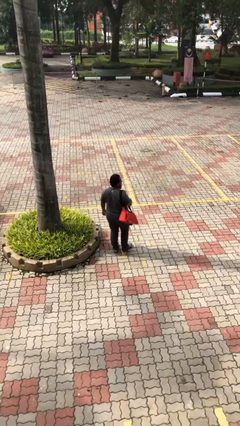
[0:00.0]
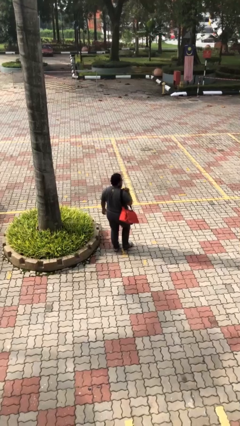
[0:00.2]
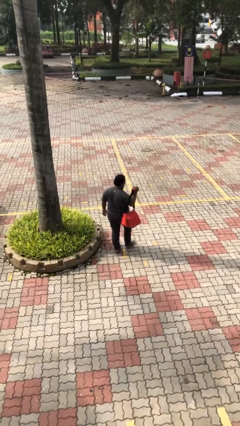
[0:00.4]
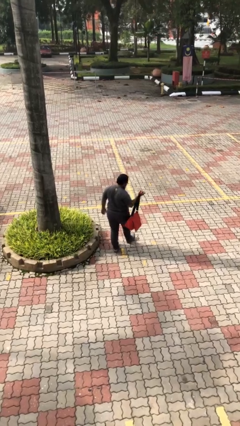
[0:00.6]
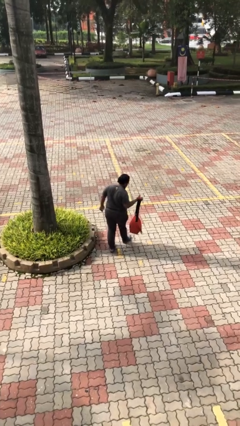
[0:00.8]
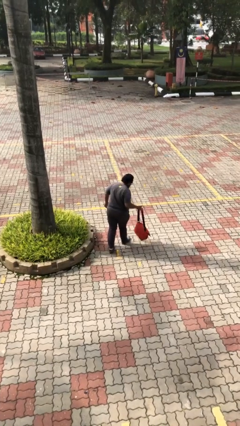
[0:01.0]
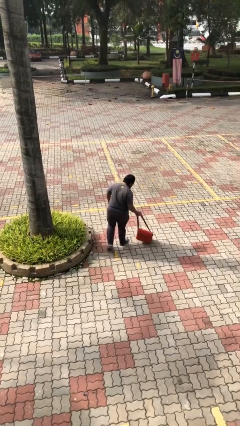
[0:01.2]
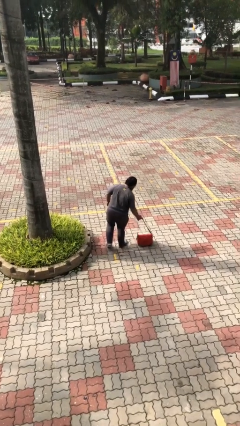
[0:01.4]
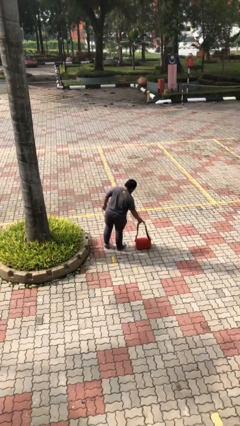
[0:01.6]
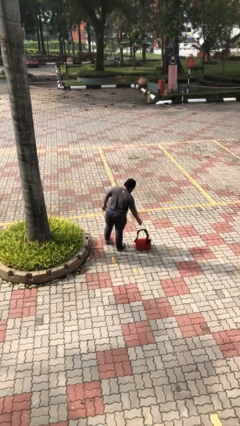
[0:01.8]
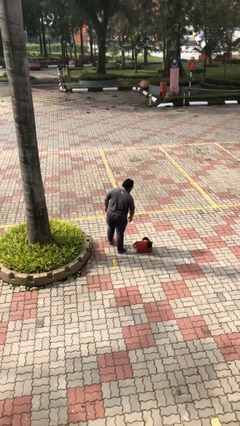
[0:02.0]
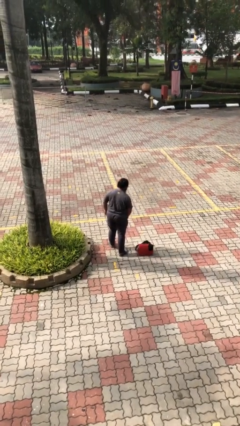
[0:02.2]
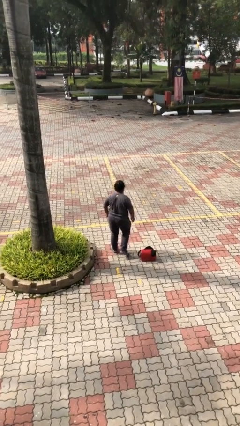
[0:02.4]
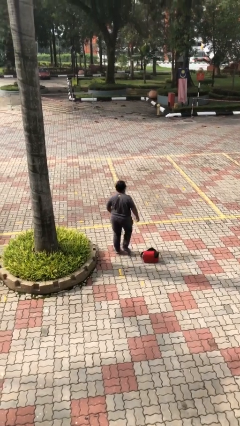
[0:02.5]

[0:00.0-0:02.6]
person puts down object on floor

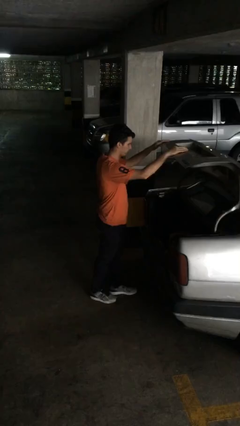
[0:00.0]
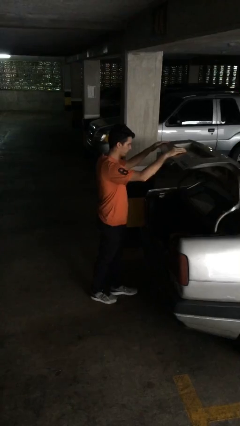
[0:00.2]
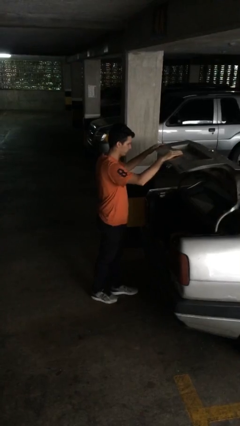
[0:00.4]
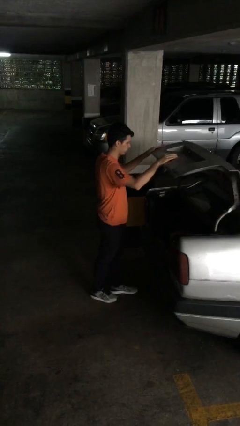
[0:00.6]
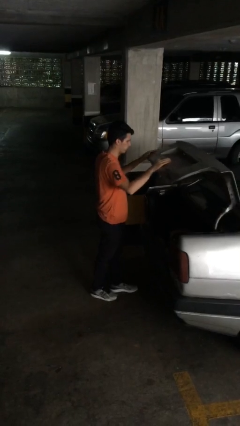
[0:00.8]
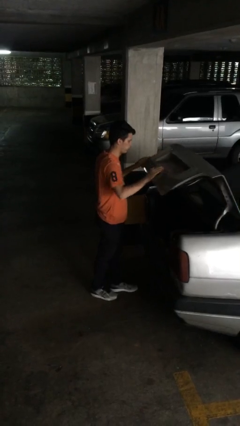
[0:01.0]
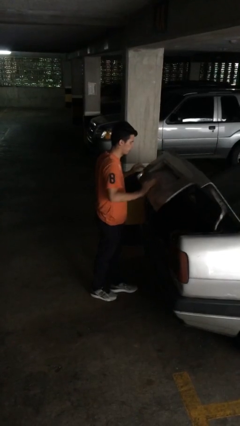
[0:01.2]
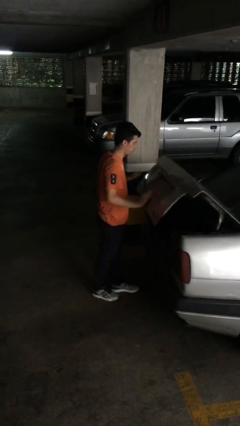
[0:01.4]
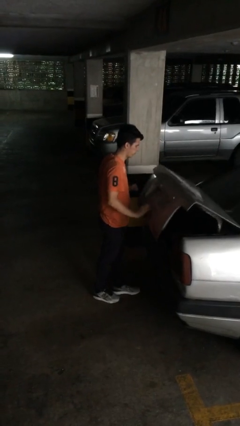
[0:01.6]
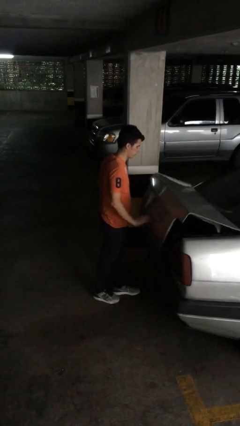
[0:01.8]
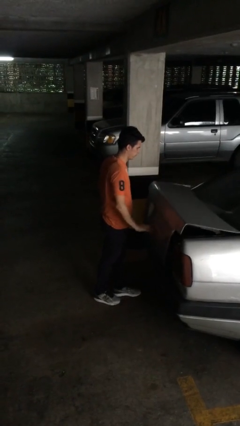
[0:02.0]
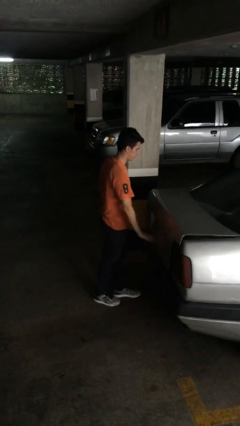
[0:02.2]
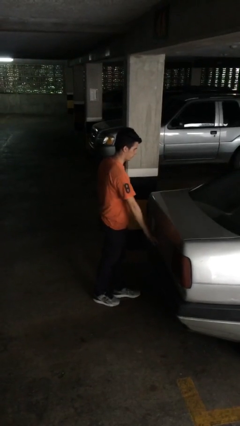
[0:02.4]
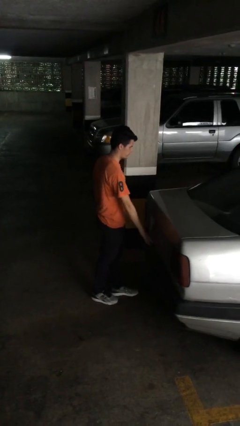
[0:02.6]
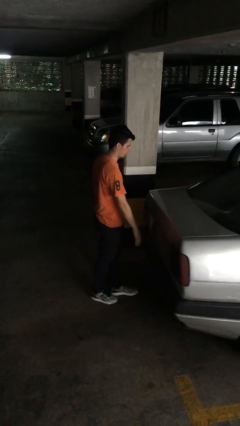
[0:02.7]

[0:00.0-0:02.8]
person closes car trunk

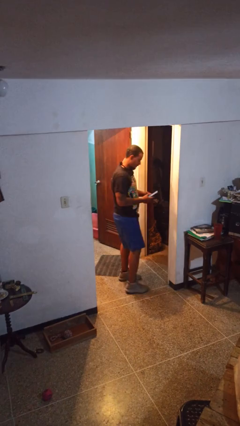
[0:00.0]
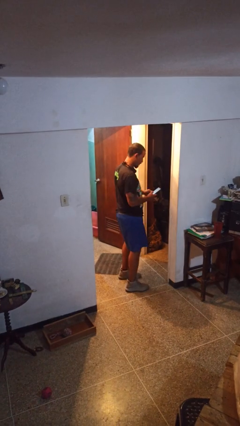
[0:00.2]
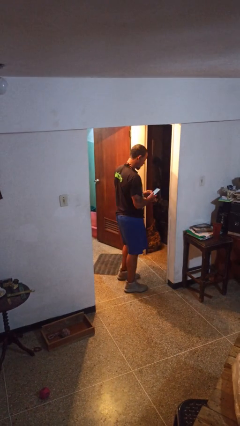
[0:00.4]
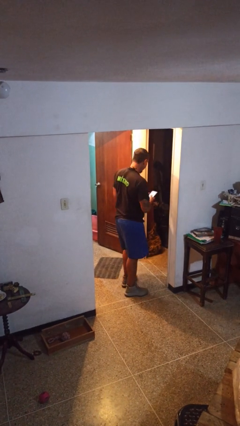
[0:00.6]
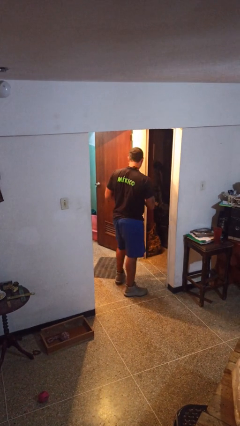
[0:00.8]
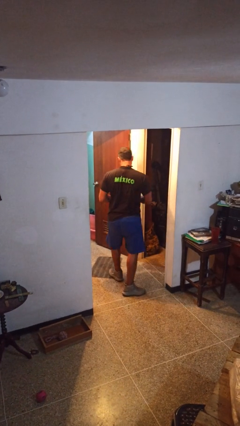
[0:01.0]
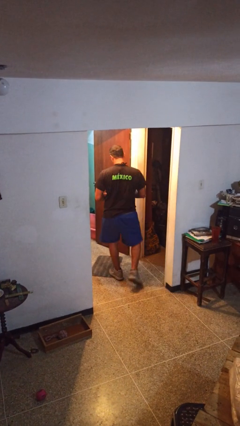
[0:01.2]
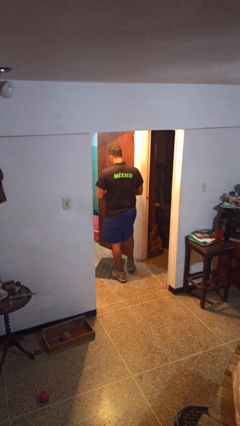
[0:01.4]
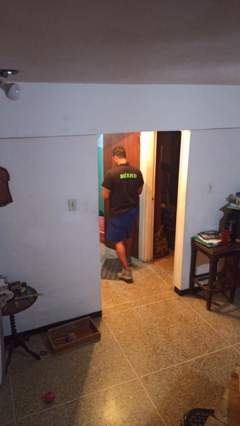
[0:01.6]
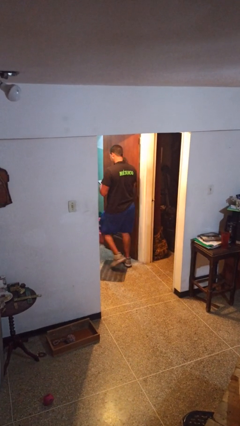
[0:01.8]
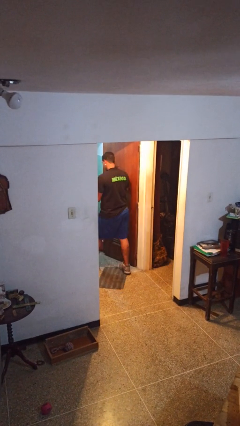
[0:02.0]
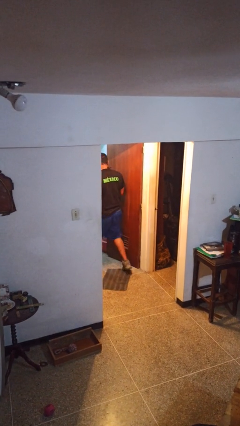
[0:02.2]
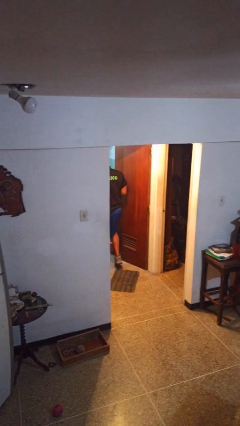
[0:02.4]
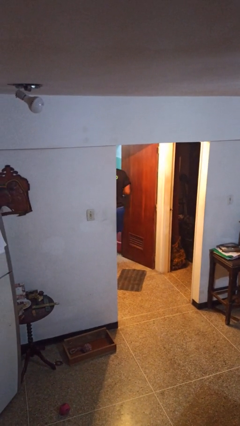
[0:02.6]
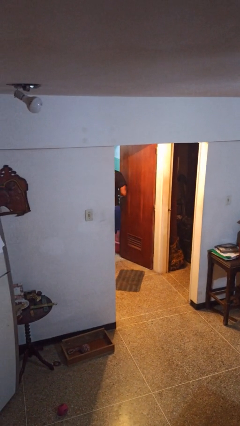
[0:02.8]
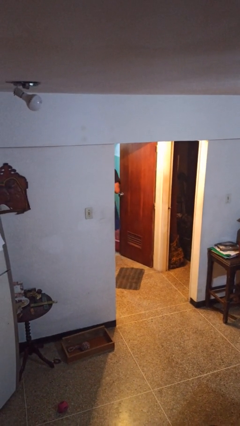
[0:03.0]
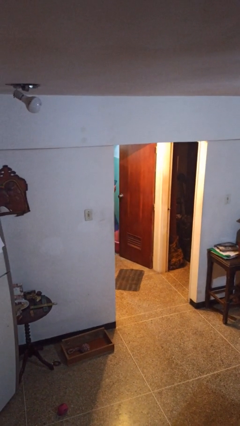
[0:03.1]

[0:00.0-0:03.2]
person exits scene through structure

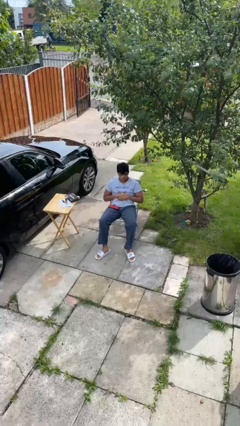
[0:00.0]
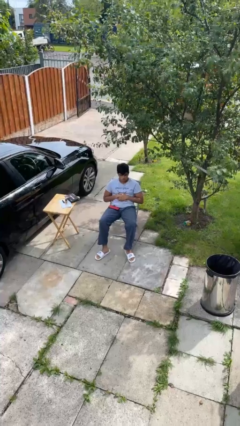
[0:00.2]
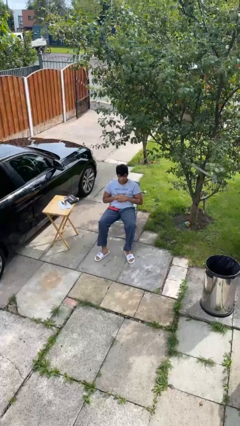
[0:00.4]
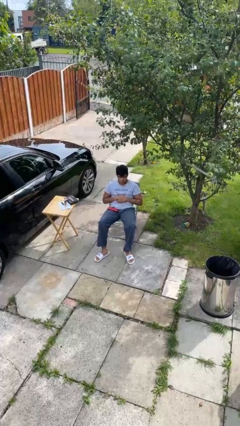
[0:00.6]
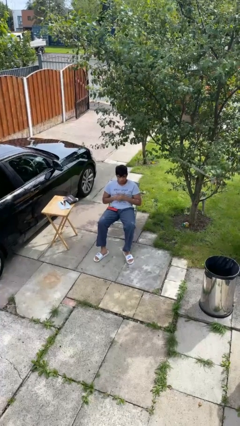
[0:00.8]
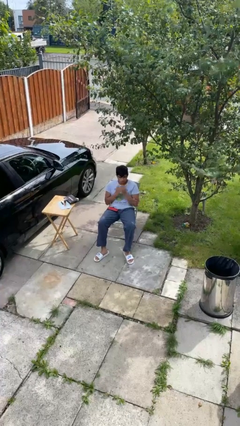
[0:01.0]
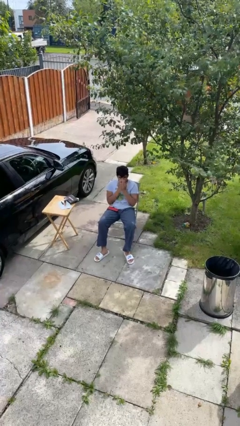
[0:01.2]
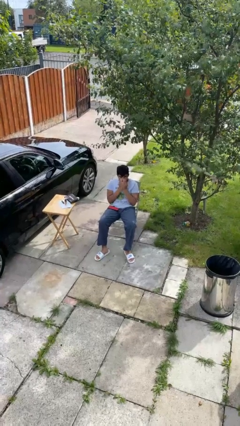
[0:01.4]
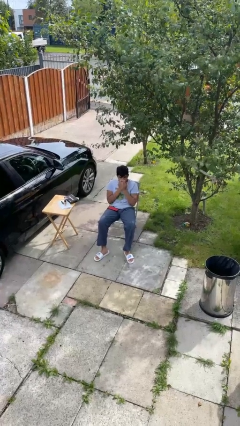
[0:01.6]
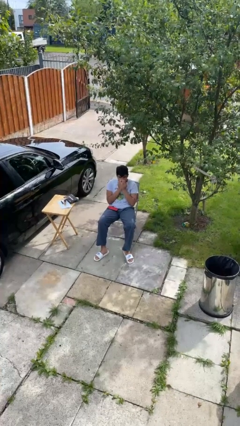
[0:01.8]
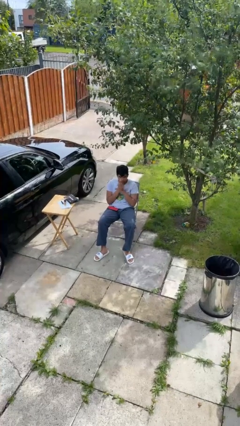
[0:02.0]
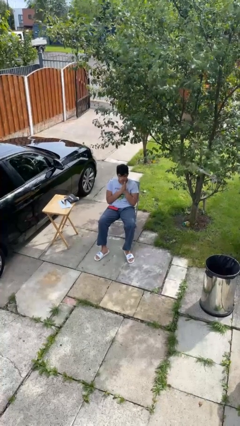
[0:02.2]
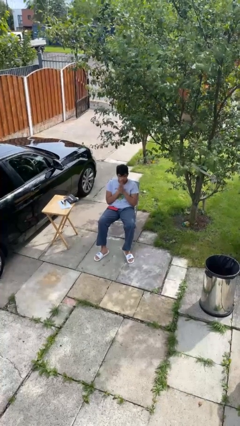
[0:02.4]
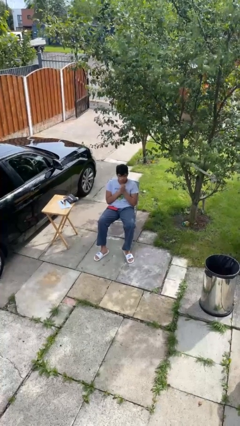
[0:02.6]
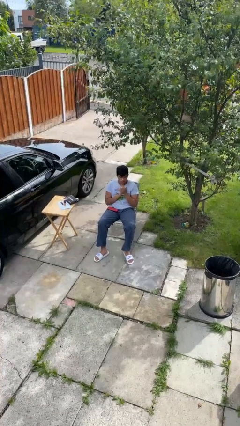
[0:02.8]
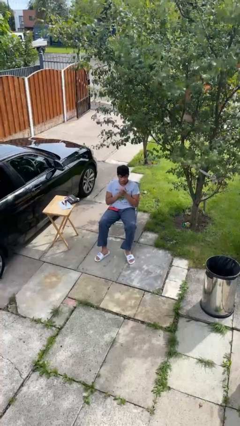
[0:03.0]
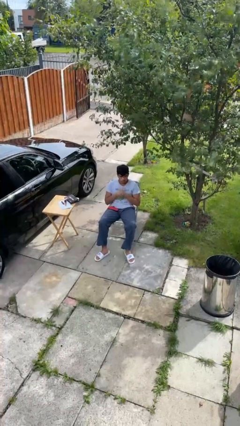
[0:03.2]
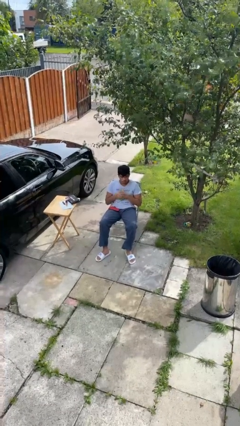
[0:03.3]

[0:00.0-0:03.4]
person blows into hands

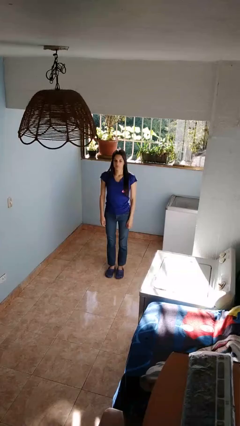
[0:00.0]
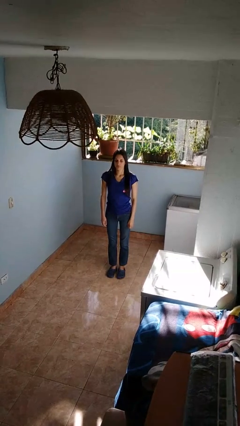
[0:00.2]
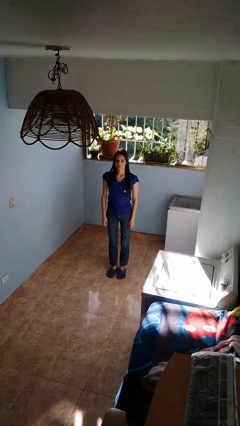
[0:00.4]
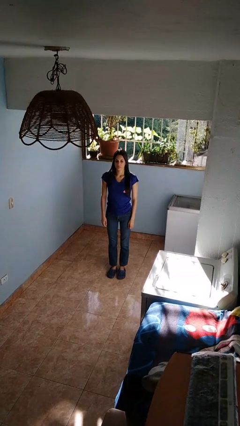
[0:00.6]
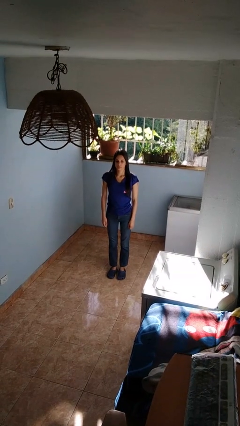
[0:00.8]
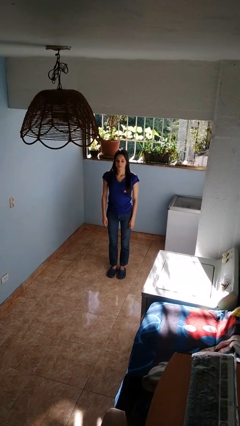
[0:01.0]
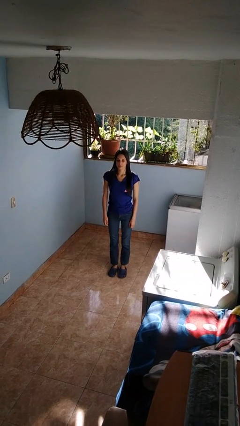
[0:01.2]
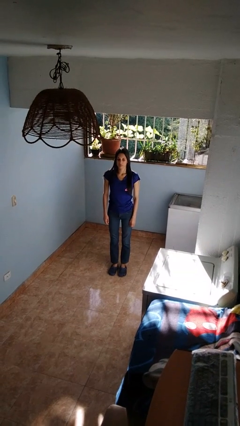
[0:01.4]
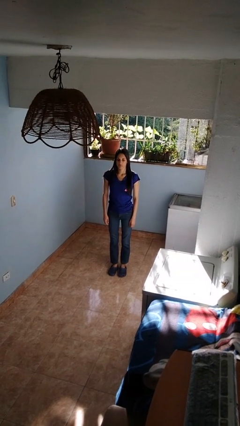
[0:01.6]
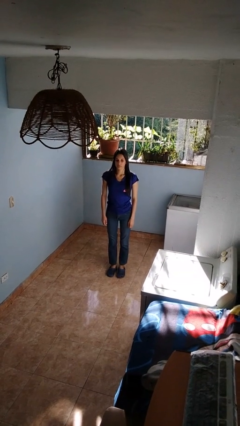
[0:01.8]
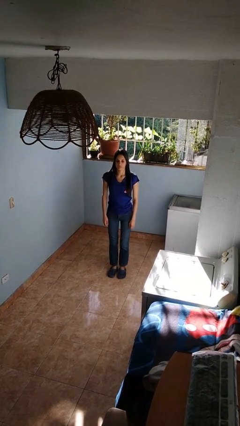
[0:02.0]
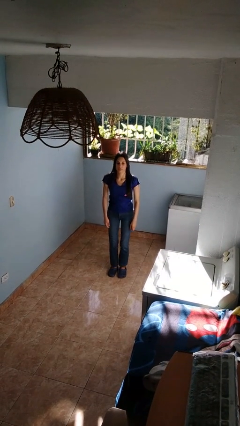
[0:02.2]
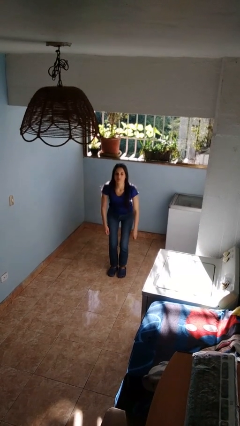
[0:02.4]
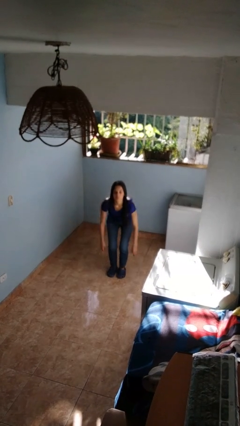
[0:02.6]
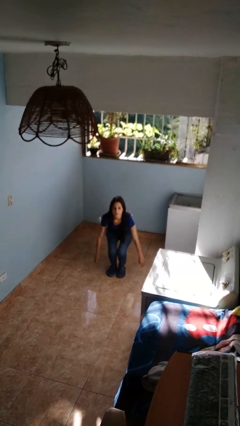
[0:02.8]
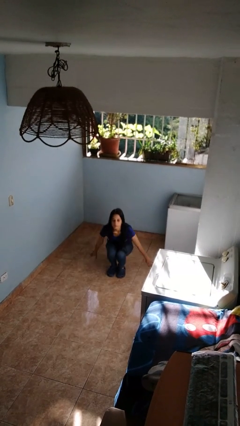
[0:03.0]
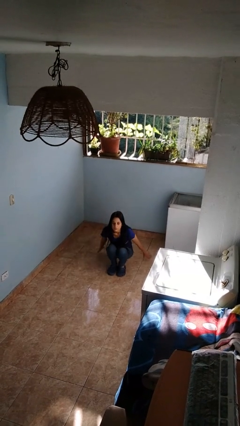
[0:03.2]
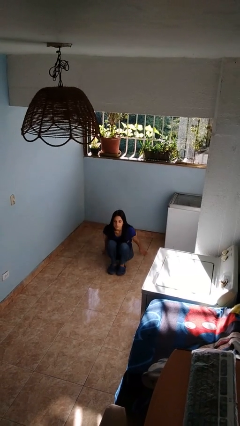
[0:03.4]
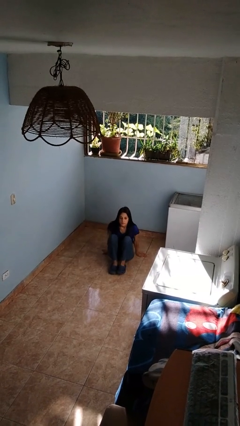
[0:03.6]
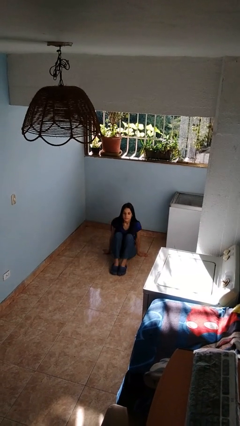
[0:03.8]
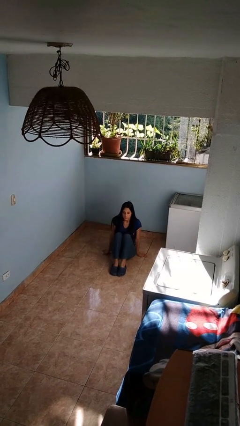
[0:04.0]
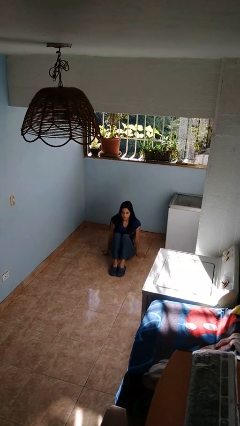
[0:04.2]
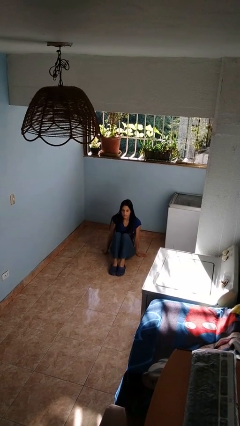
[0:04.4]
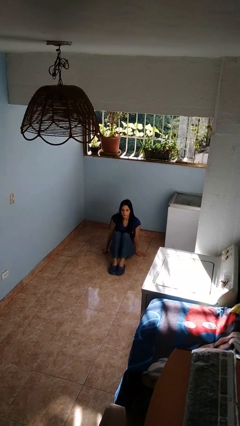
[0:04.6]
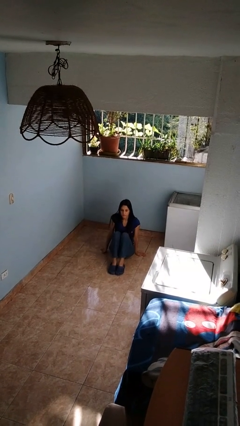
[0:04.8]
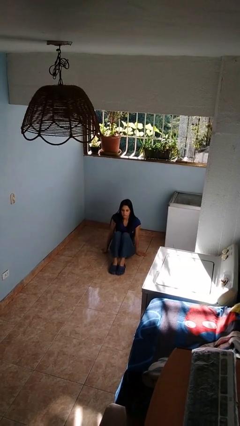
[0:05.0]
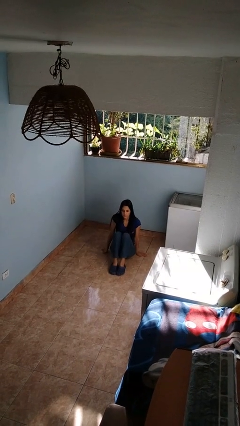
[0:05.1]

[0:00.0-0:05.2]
person sits crisscross

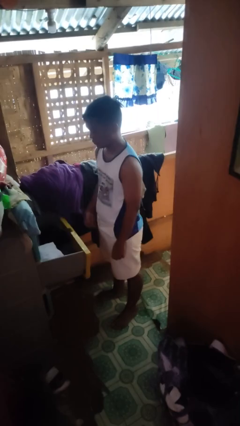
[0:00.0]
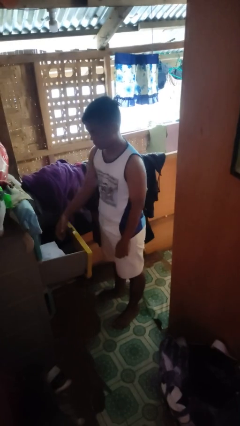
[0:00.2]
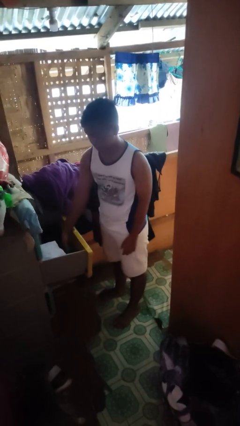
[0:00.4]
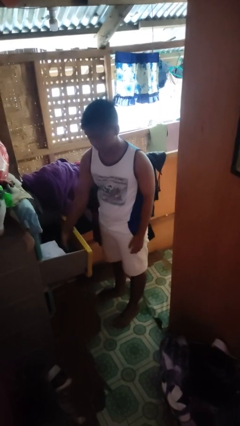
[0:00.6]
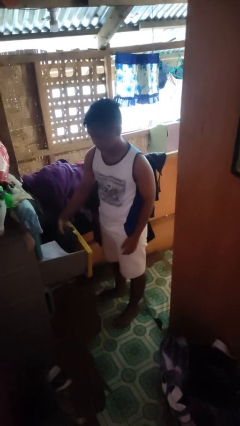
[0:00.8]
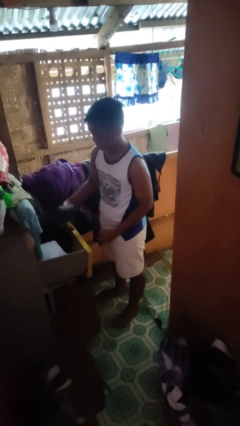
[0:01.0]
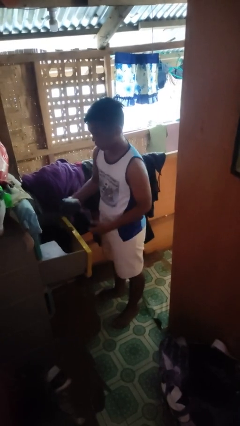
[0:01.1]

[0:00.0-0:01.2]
person takes clothes from dresser
